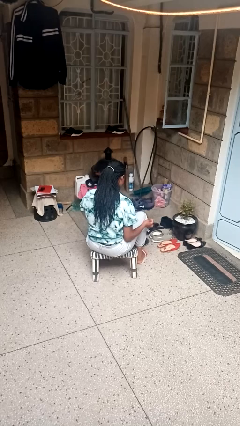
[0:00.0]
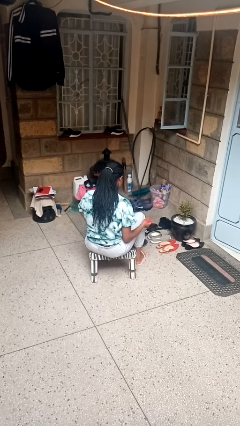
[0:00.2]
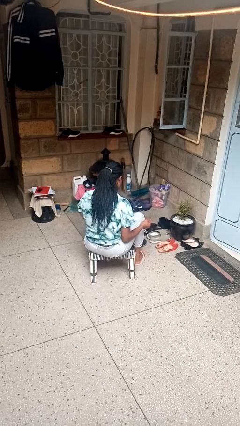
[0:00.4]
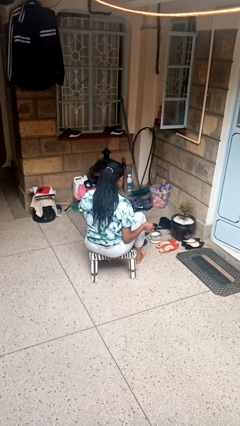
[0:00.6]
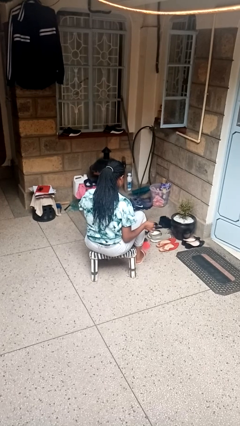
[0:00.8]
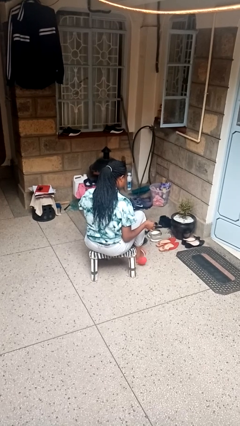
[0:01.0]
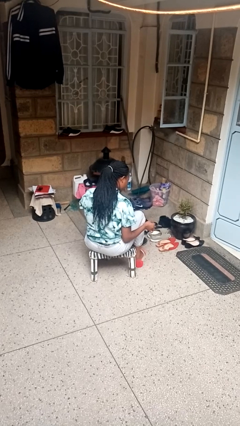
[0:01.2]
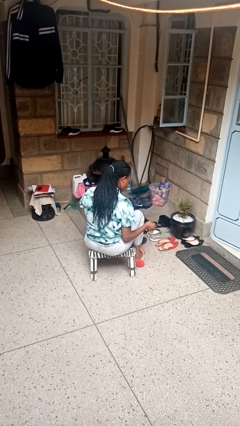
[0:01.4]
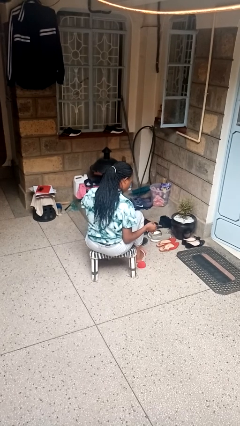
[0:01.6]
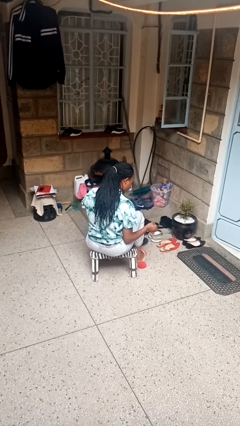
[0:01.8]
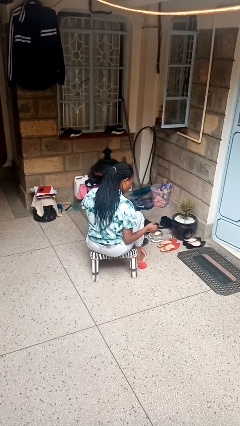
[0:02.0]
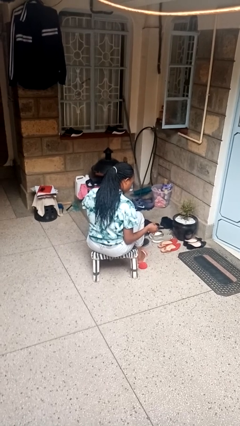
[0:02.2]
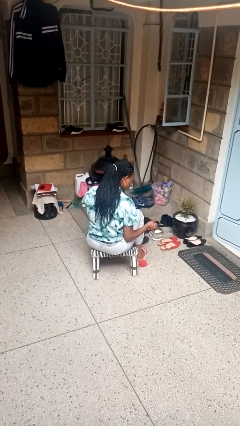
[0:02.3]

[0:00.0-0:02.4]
person drops object

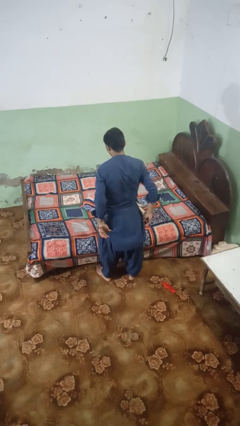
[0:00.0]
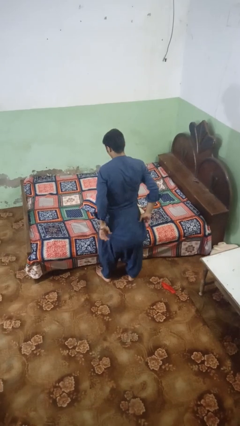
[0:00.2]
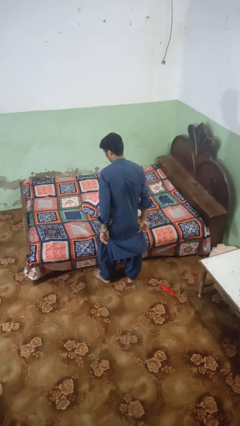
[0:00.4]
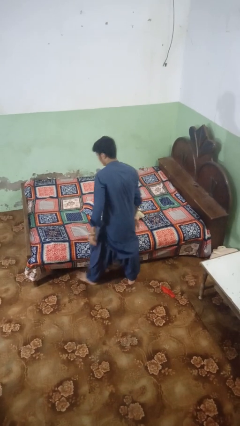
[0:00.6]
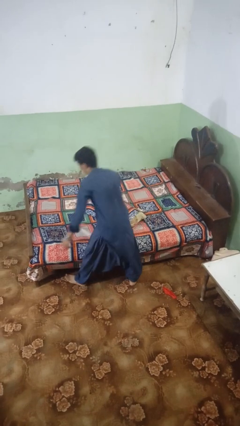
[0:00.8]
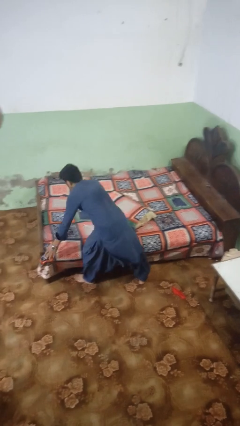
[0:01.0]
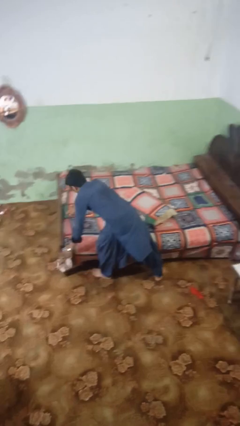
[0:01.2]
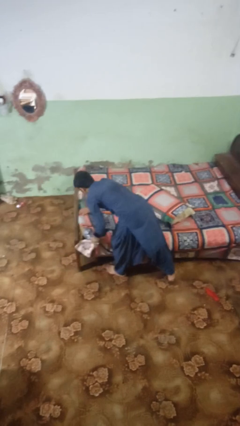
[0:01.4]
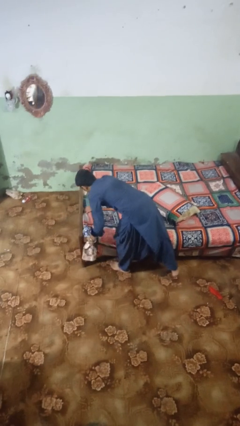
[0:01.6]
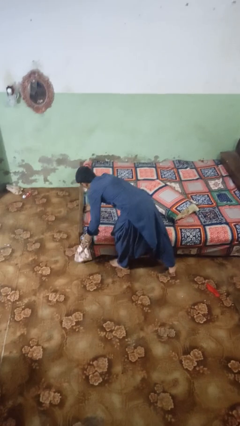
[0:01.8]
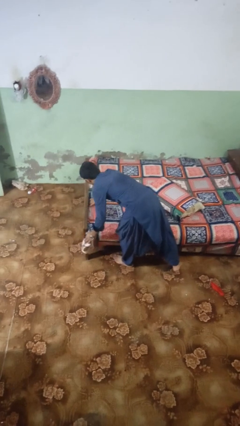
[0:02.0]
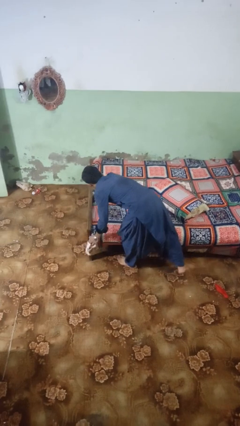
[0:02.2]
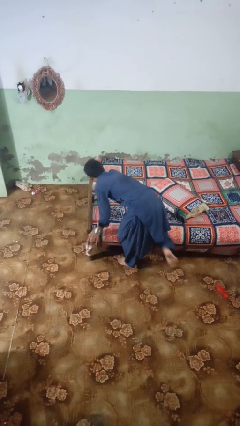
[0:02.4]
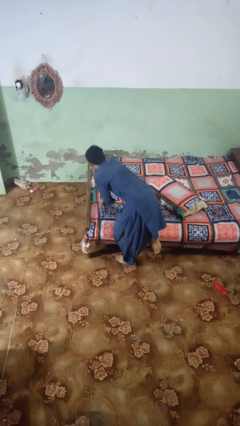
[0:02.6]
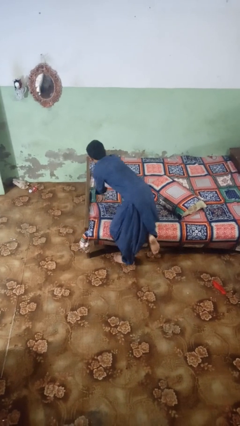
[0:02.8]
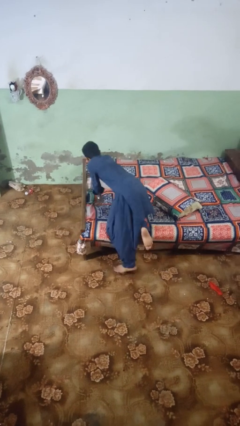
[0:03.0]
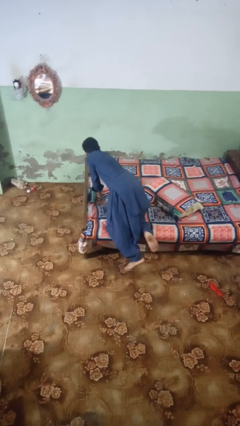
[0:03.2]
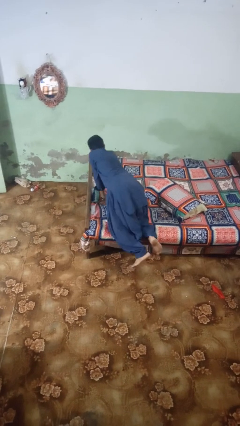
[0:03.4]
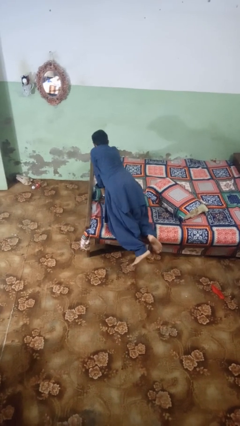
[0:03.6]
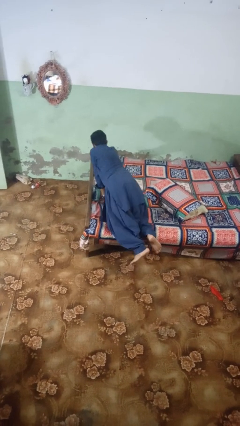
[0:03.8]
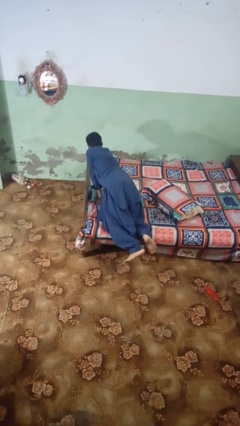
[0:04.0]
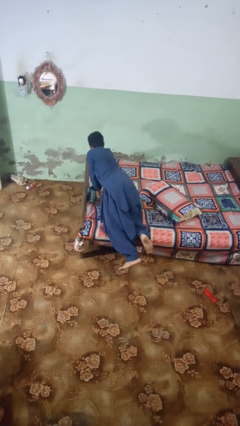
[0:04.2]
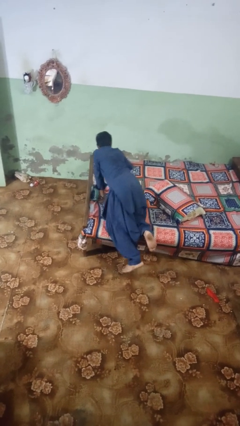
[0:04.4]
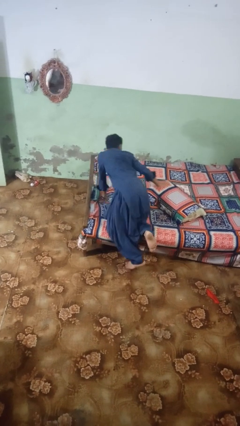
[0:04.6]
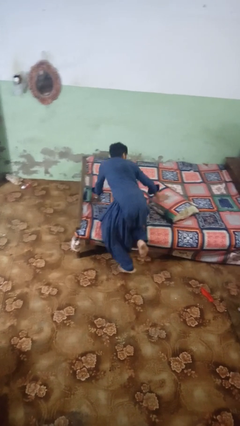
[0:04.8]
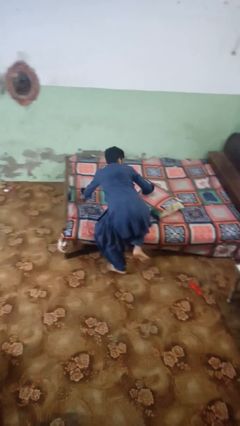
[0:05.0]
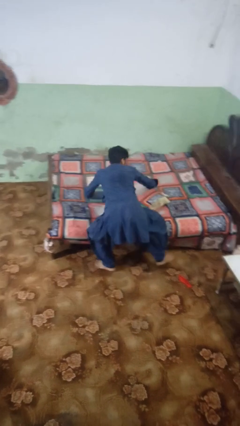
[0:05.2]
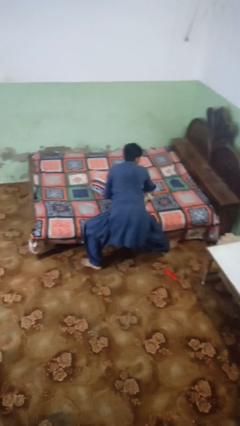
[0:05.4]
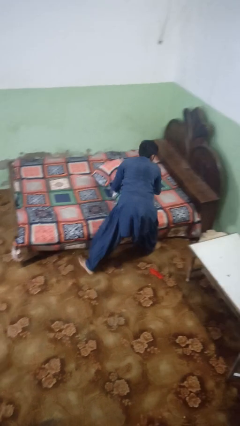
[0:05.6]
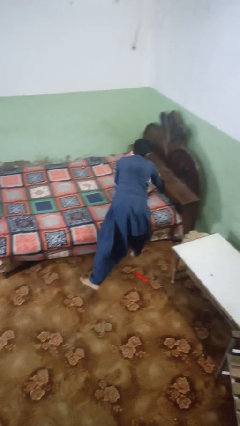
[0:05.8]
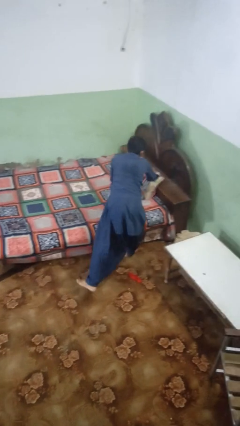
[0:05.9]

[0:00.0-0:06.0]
person makes bed

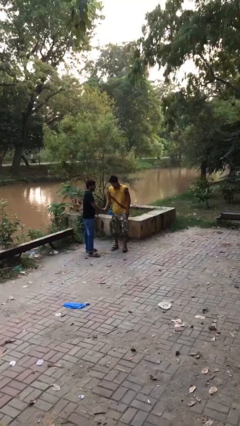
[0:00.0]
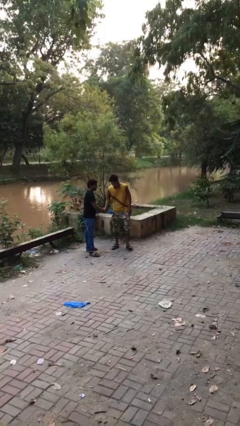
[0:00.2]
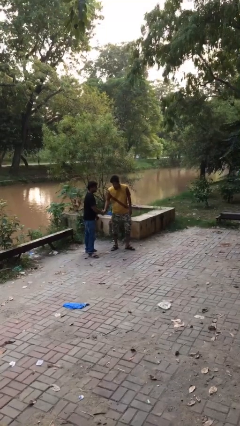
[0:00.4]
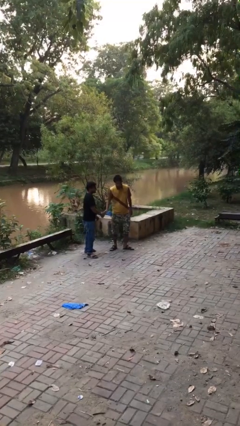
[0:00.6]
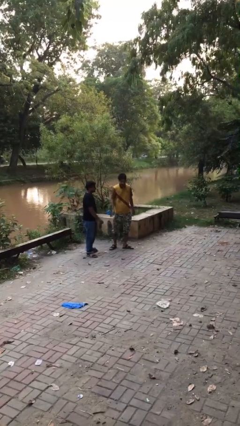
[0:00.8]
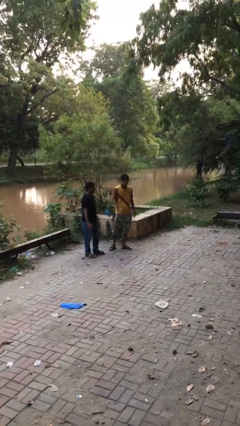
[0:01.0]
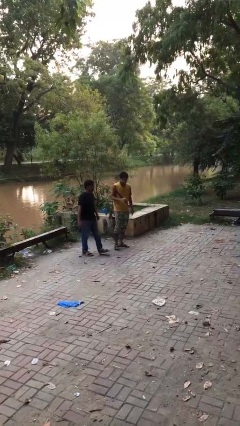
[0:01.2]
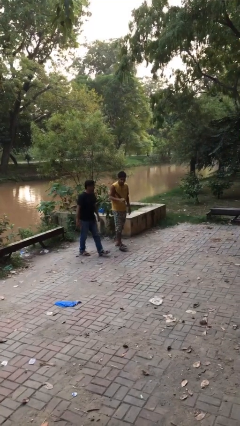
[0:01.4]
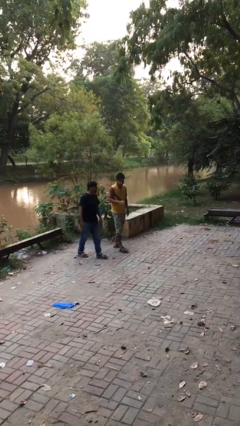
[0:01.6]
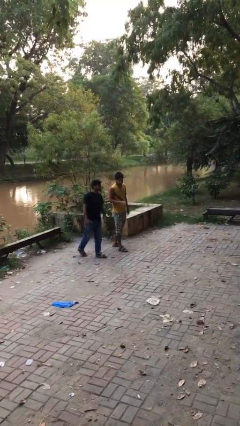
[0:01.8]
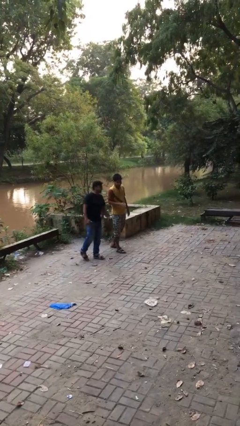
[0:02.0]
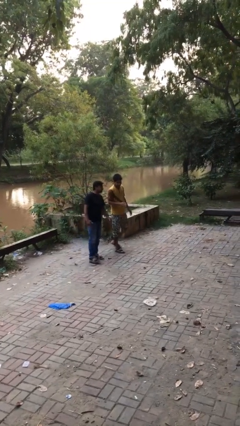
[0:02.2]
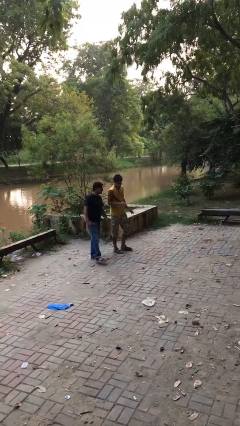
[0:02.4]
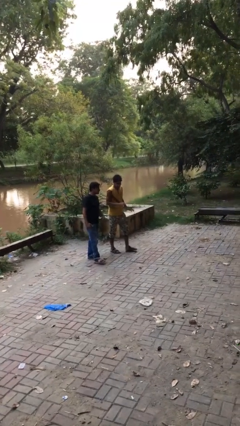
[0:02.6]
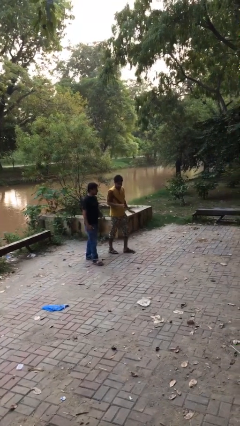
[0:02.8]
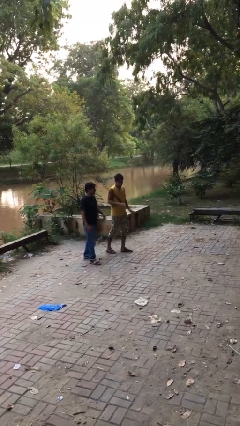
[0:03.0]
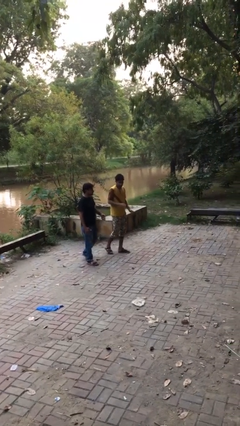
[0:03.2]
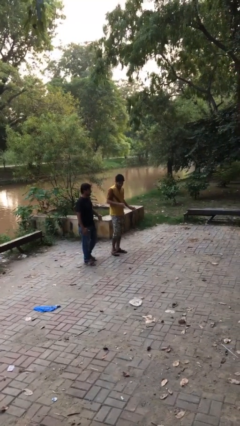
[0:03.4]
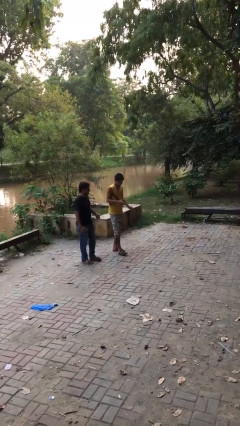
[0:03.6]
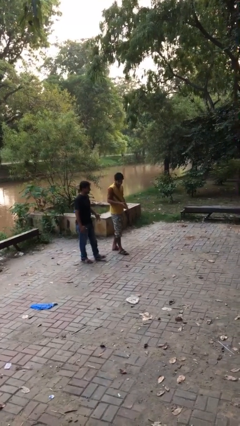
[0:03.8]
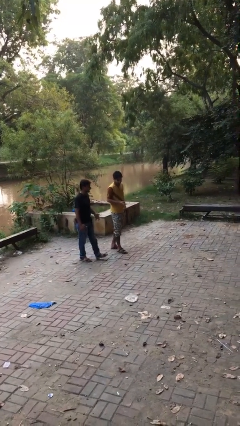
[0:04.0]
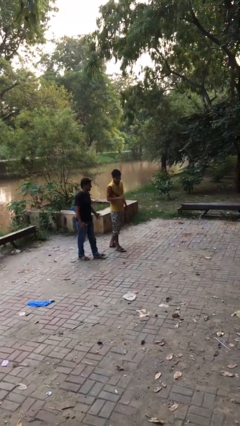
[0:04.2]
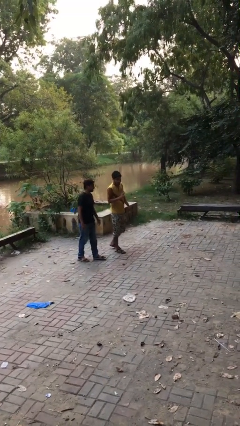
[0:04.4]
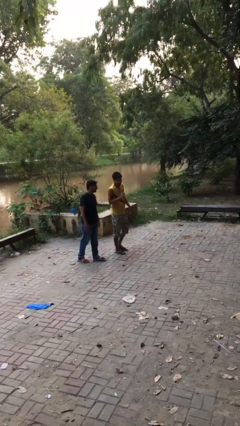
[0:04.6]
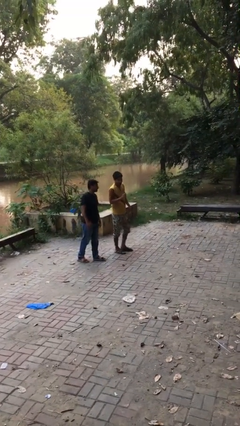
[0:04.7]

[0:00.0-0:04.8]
person talks to person

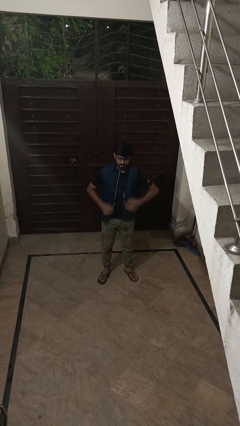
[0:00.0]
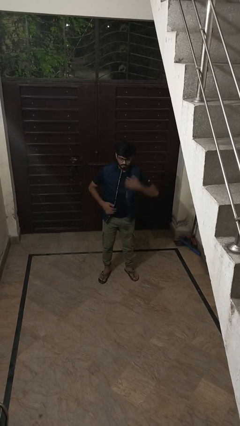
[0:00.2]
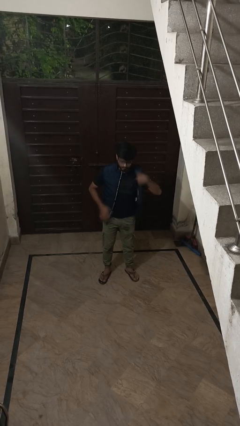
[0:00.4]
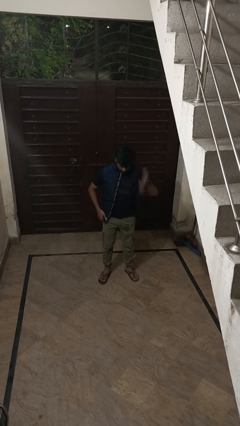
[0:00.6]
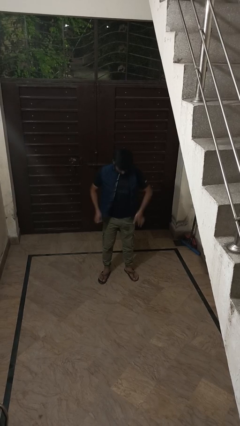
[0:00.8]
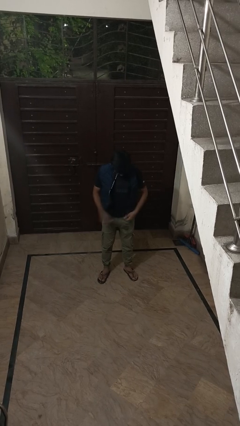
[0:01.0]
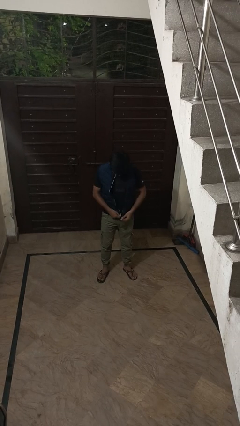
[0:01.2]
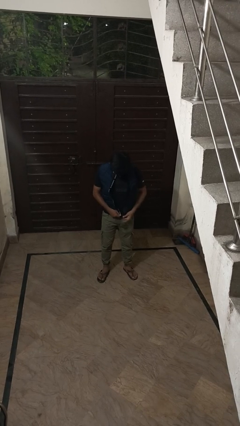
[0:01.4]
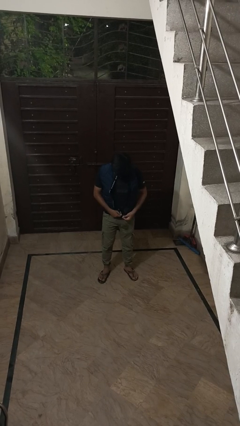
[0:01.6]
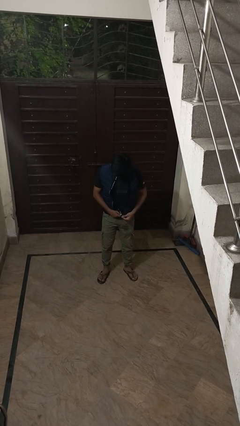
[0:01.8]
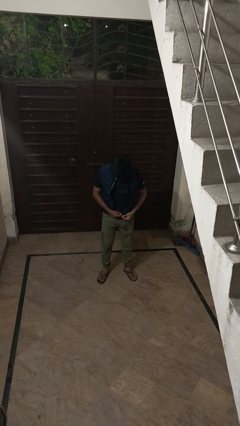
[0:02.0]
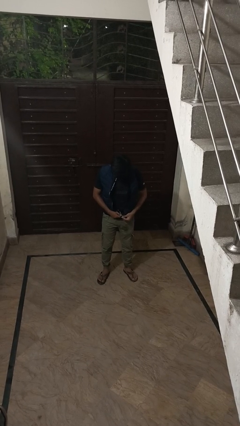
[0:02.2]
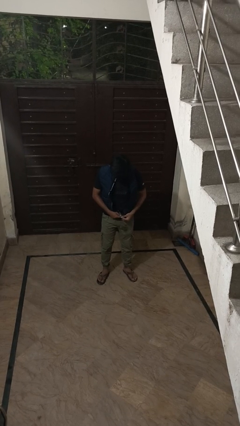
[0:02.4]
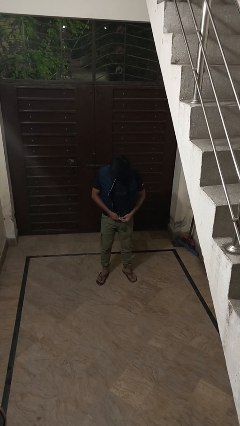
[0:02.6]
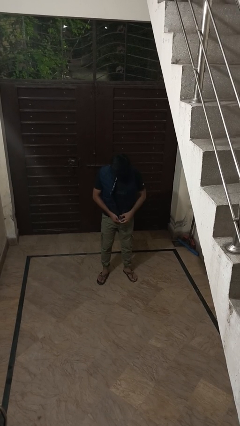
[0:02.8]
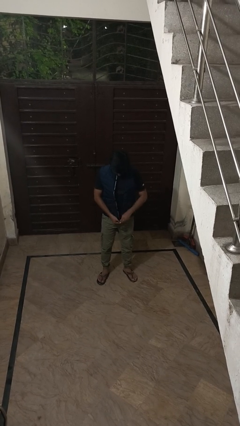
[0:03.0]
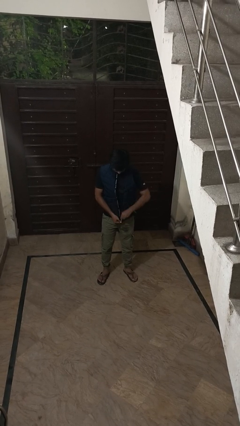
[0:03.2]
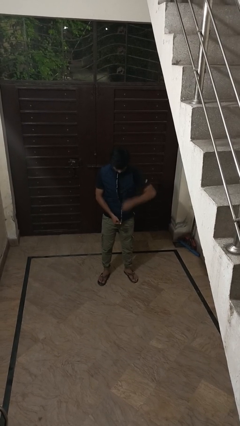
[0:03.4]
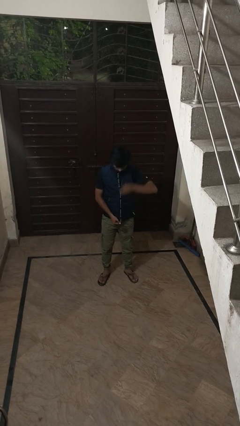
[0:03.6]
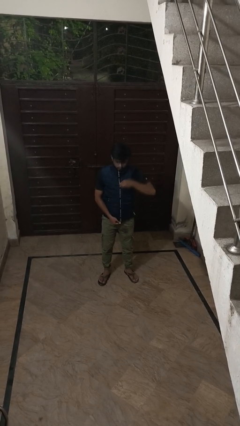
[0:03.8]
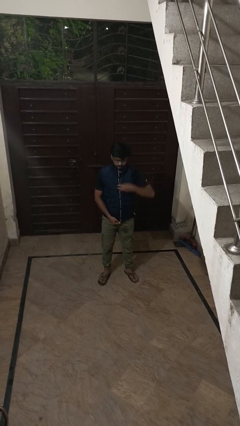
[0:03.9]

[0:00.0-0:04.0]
person zips up jacket

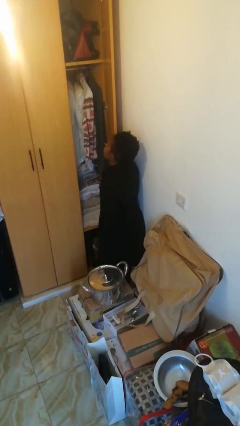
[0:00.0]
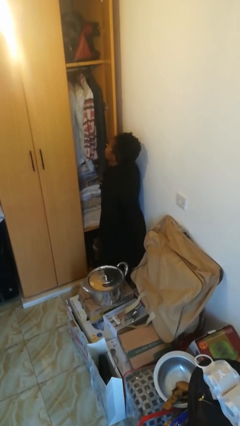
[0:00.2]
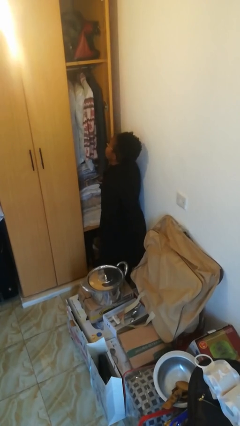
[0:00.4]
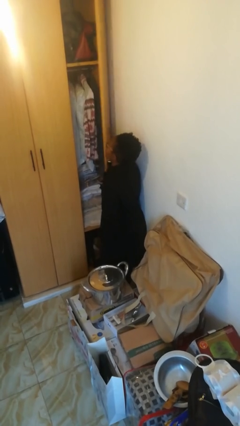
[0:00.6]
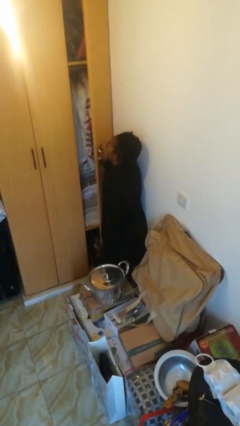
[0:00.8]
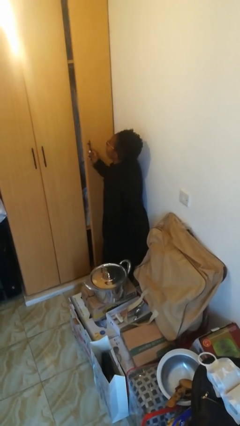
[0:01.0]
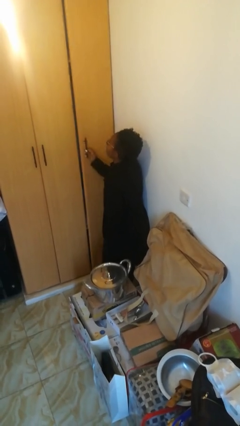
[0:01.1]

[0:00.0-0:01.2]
person closes closet door
